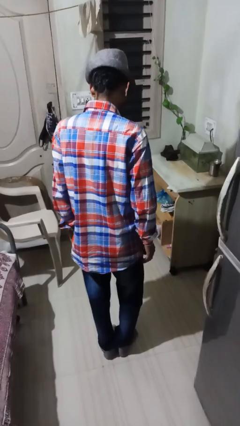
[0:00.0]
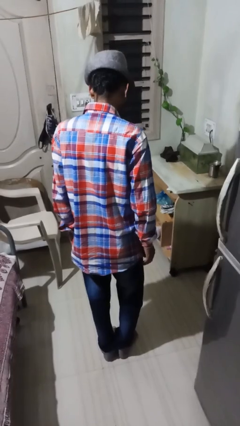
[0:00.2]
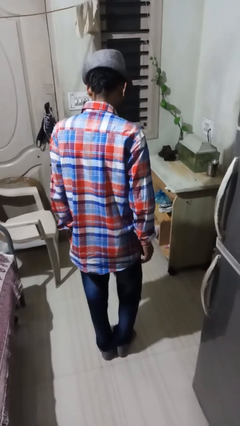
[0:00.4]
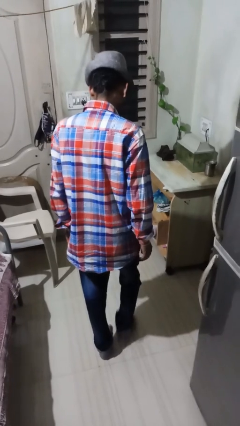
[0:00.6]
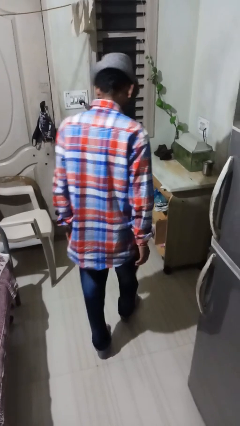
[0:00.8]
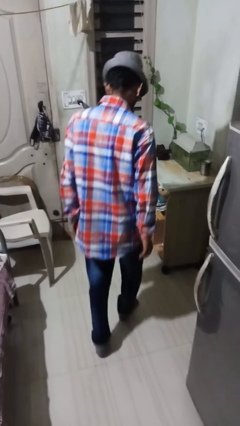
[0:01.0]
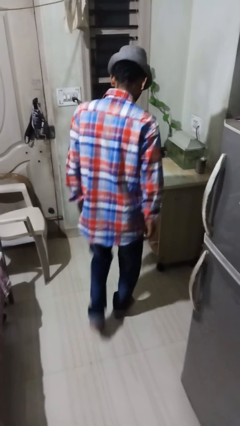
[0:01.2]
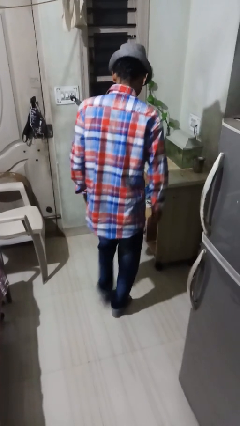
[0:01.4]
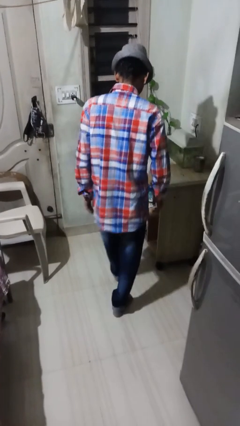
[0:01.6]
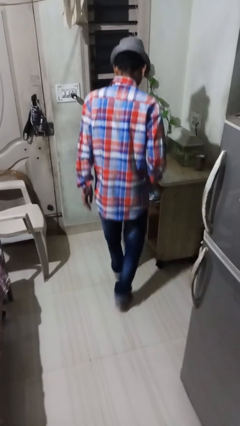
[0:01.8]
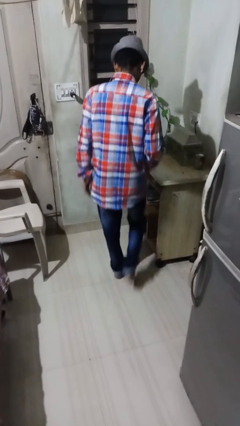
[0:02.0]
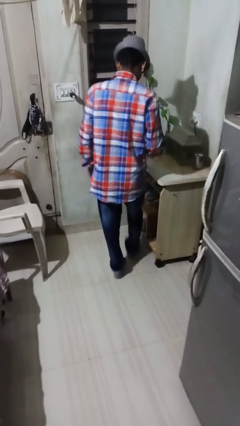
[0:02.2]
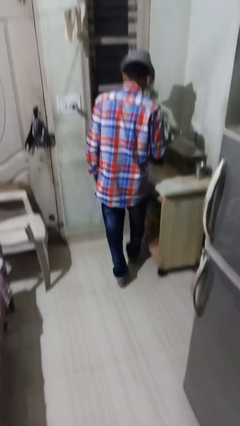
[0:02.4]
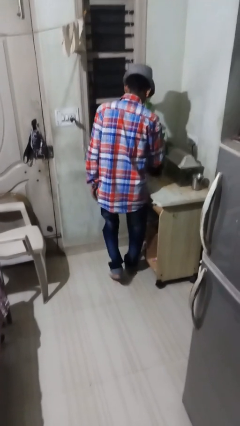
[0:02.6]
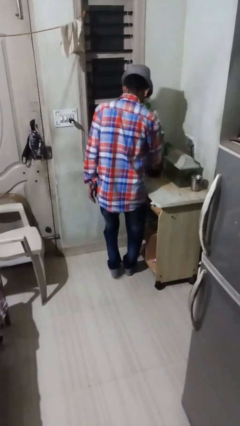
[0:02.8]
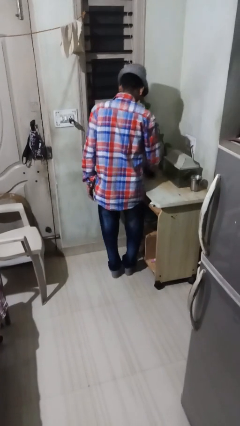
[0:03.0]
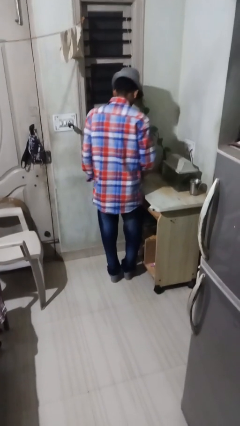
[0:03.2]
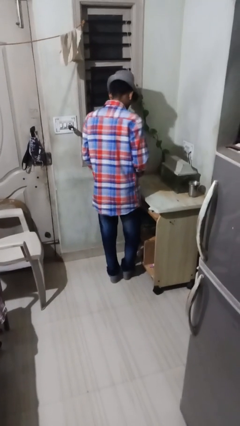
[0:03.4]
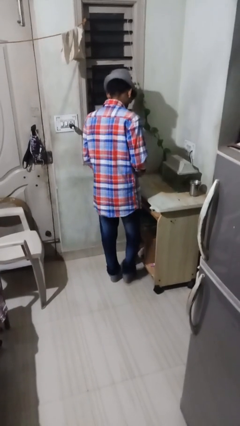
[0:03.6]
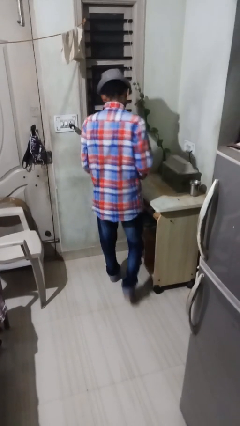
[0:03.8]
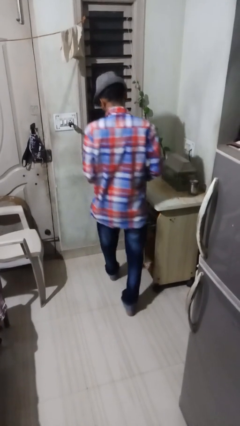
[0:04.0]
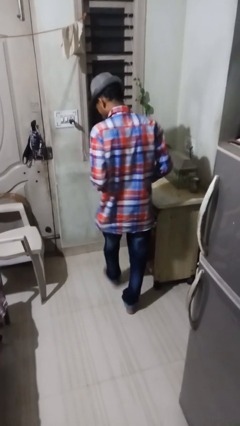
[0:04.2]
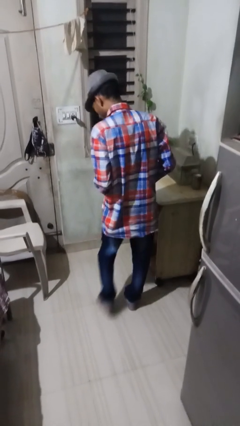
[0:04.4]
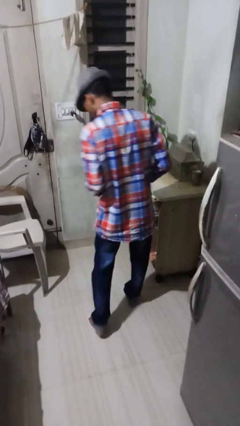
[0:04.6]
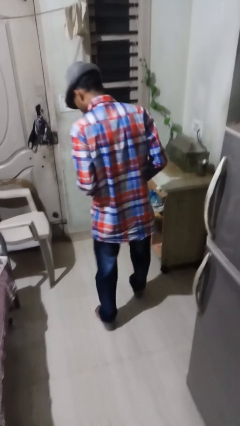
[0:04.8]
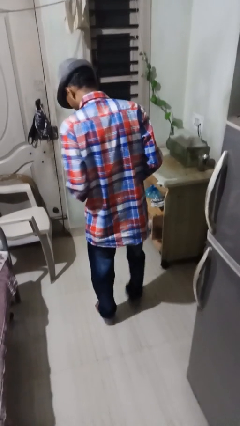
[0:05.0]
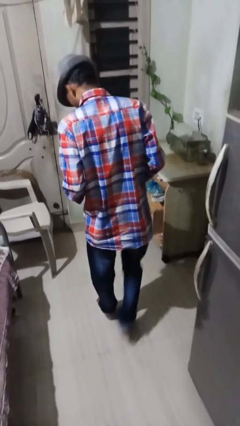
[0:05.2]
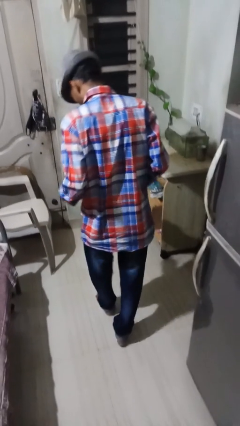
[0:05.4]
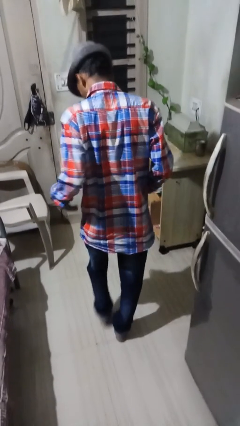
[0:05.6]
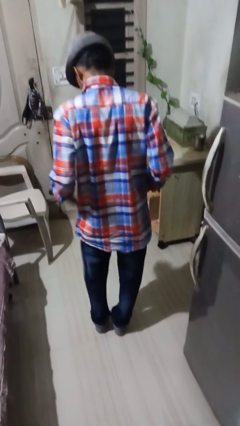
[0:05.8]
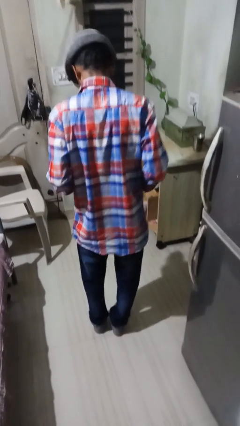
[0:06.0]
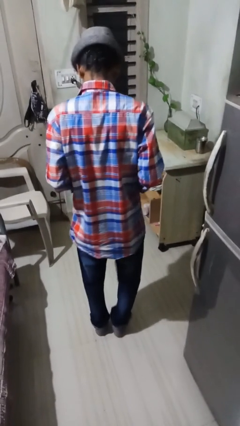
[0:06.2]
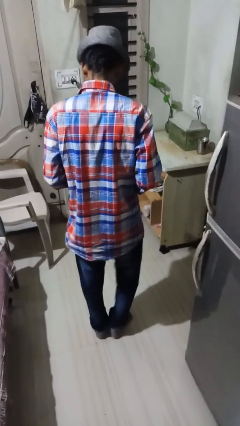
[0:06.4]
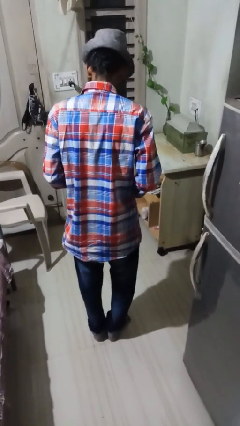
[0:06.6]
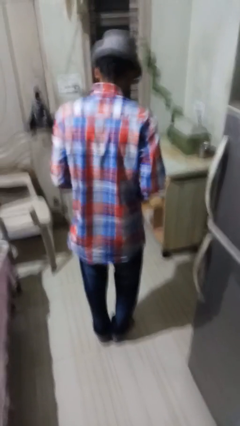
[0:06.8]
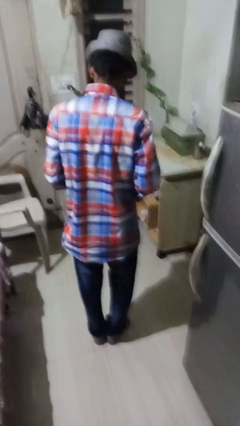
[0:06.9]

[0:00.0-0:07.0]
person picks up object from table

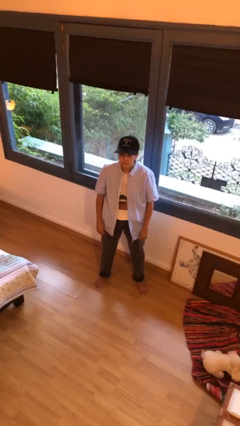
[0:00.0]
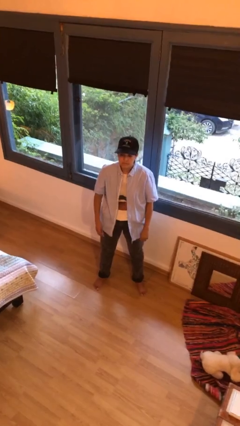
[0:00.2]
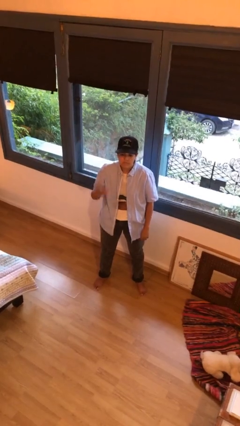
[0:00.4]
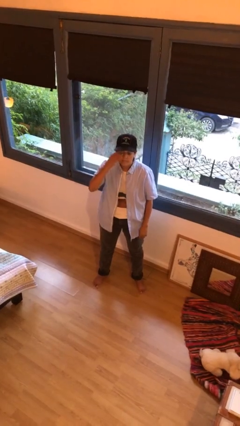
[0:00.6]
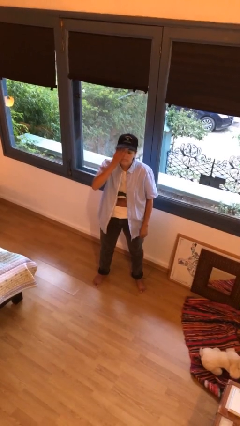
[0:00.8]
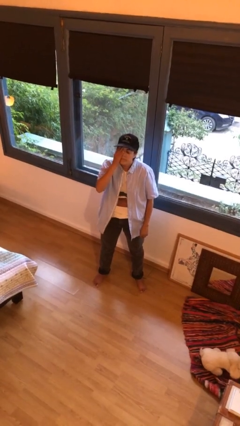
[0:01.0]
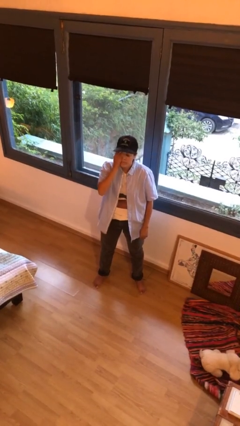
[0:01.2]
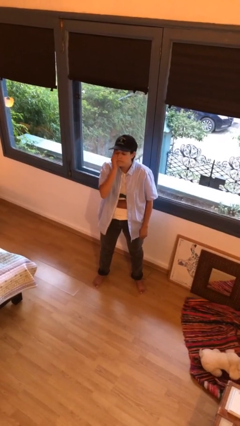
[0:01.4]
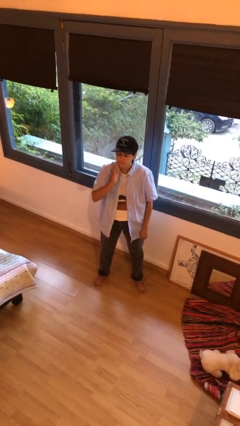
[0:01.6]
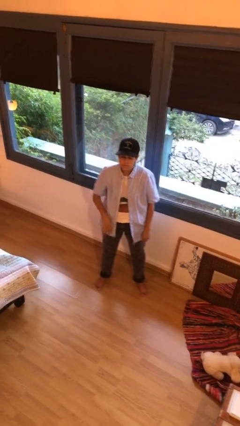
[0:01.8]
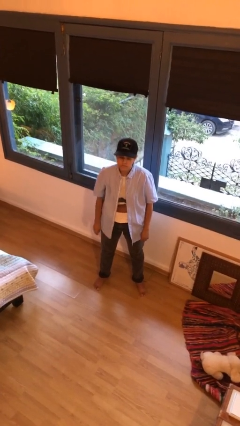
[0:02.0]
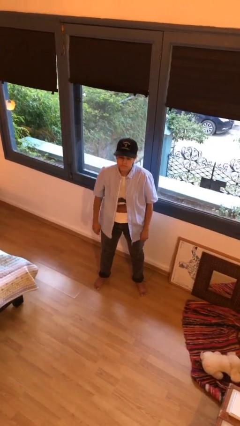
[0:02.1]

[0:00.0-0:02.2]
person rubs eyes

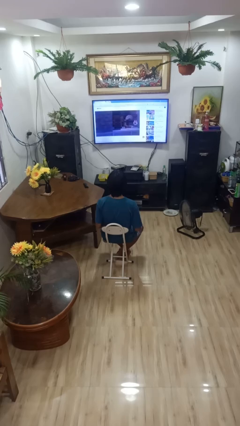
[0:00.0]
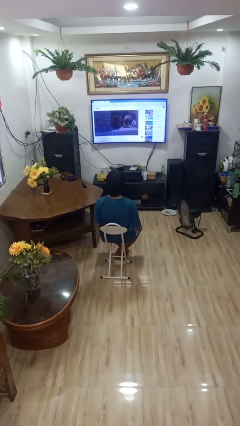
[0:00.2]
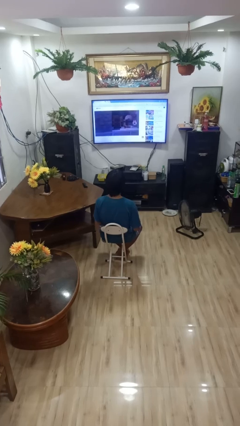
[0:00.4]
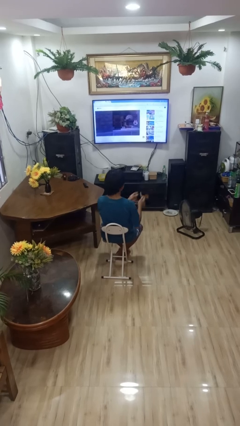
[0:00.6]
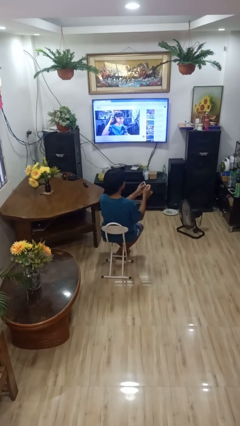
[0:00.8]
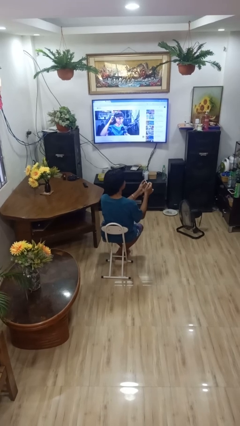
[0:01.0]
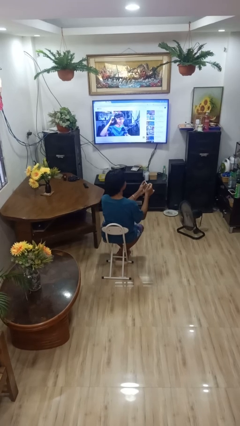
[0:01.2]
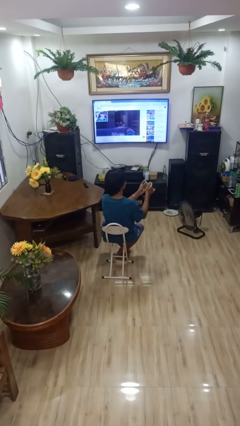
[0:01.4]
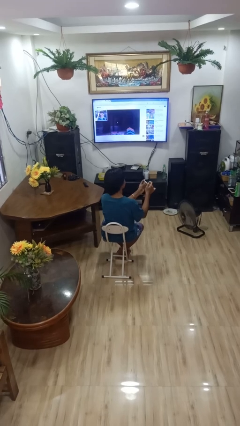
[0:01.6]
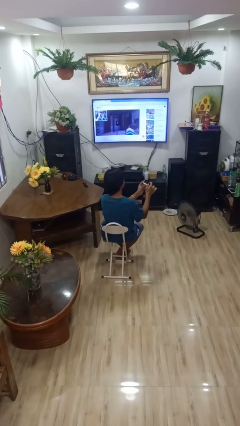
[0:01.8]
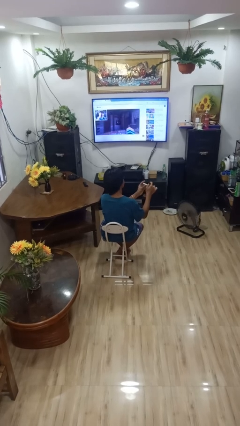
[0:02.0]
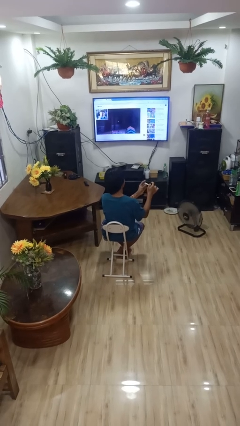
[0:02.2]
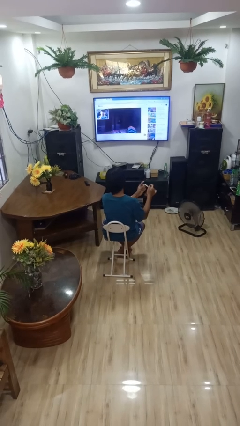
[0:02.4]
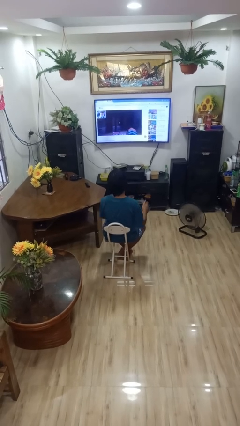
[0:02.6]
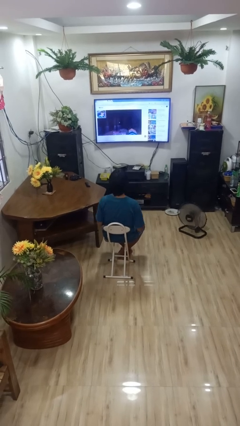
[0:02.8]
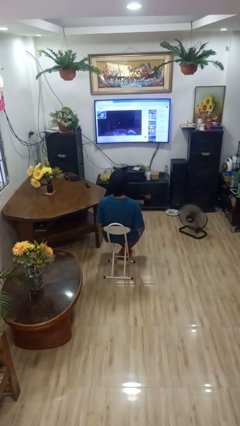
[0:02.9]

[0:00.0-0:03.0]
person files fingernails

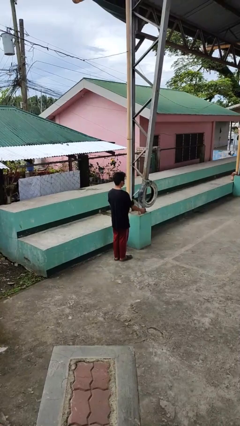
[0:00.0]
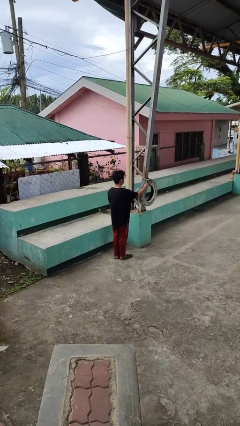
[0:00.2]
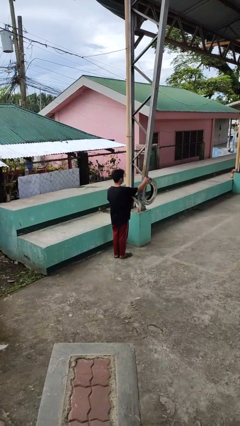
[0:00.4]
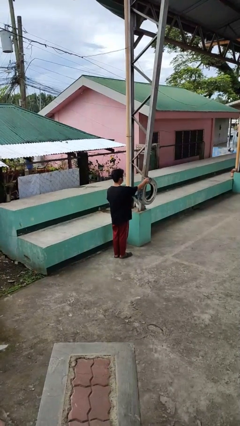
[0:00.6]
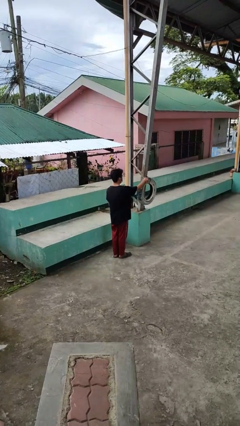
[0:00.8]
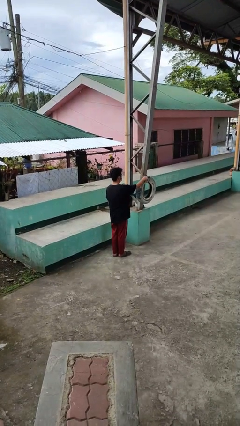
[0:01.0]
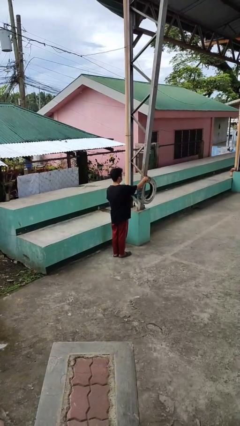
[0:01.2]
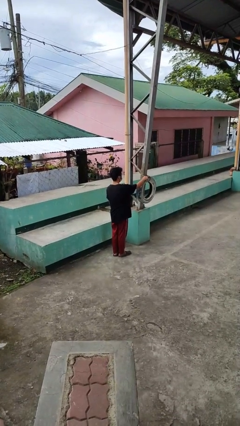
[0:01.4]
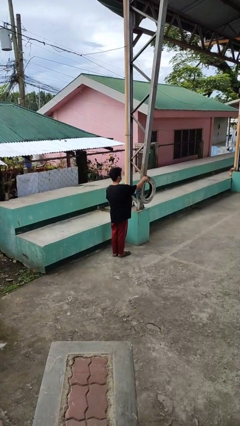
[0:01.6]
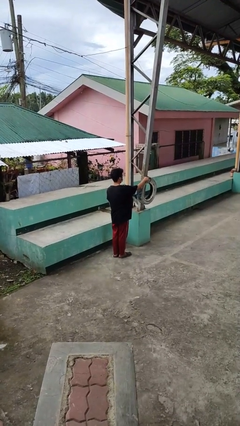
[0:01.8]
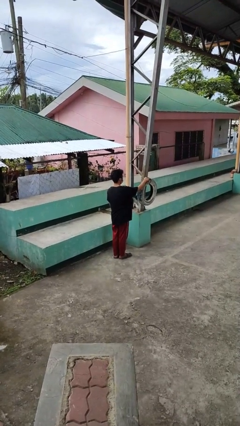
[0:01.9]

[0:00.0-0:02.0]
person taps object with finger

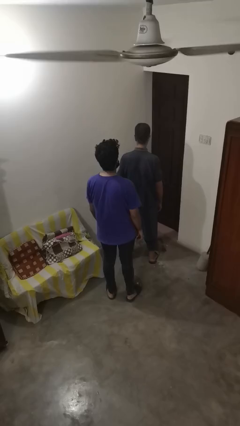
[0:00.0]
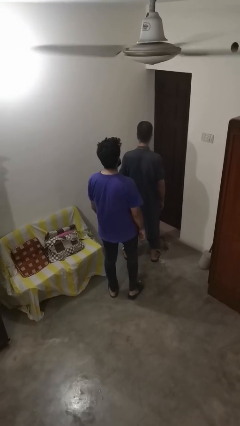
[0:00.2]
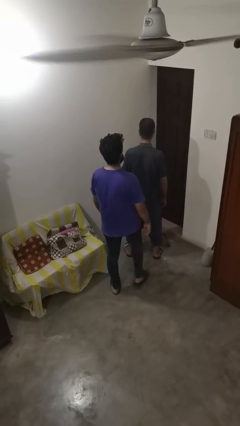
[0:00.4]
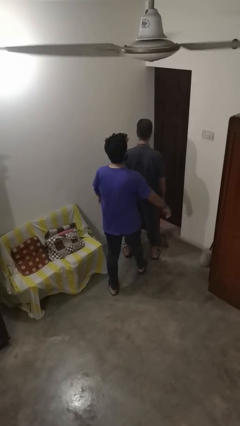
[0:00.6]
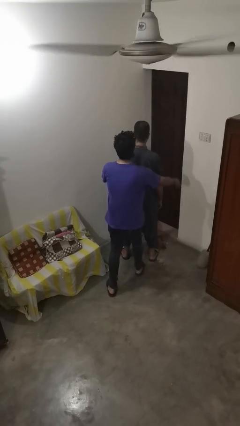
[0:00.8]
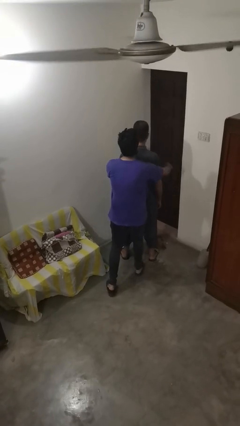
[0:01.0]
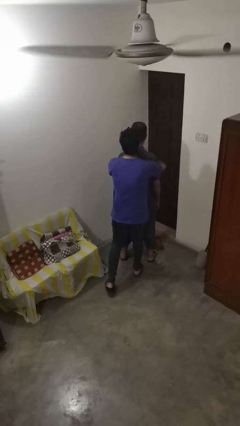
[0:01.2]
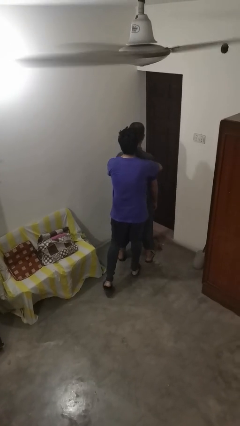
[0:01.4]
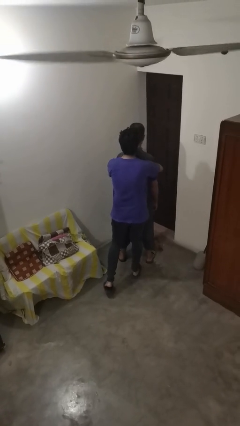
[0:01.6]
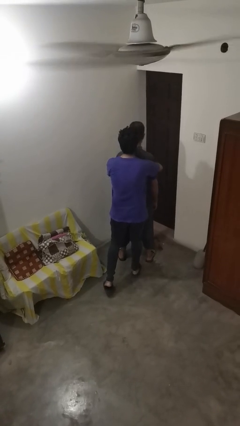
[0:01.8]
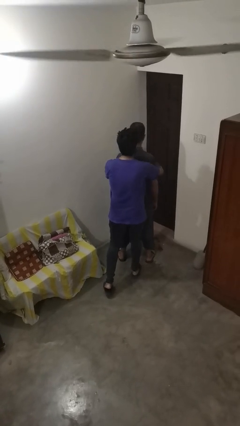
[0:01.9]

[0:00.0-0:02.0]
person hugs person from behind

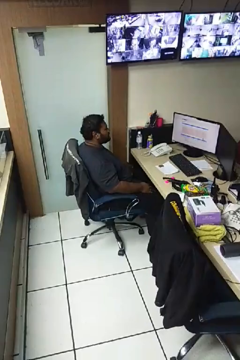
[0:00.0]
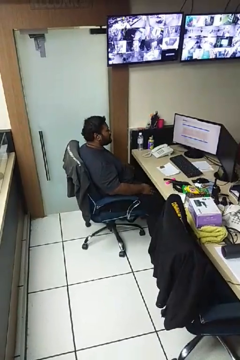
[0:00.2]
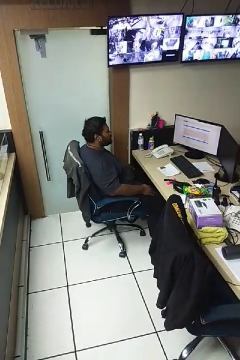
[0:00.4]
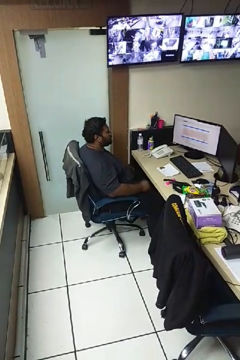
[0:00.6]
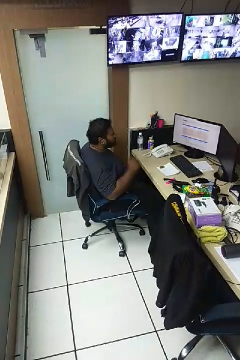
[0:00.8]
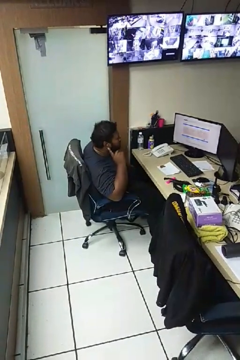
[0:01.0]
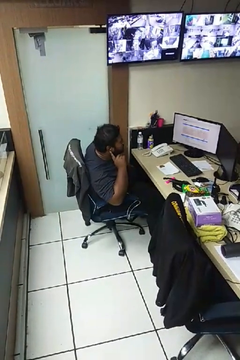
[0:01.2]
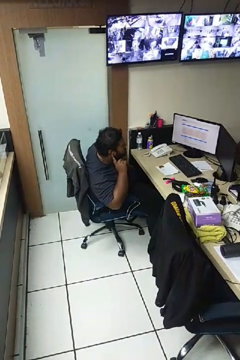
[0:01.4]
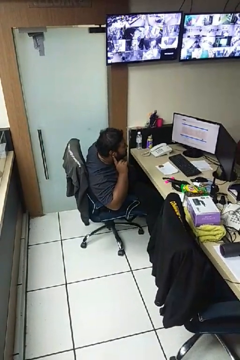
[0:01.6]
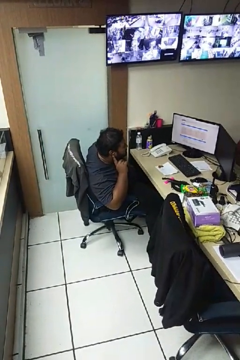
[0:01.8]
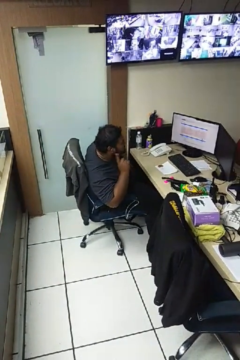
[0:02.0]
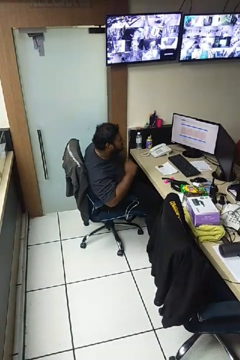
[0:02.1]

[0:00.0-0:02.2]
person gestures listen closely
